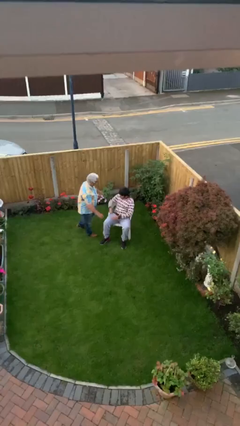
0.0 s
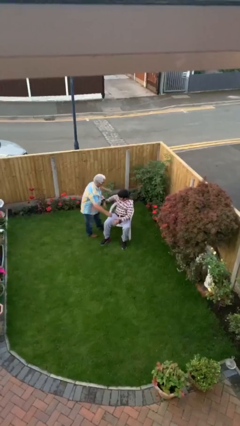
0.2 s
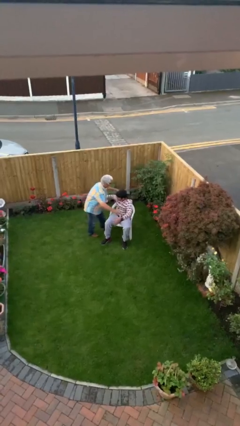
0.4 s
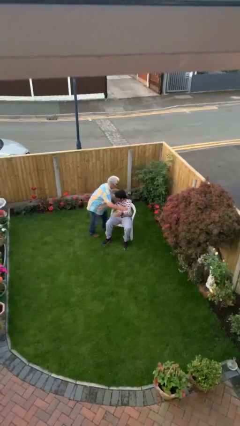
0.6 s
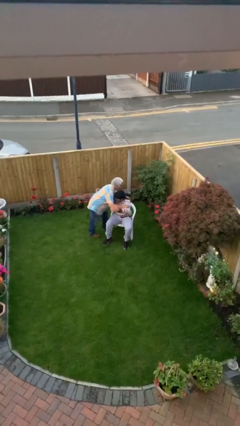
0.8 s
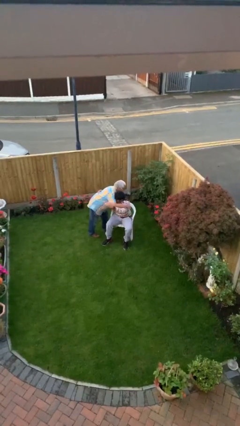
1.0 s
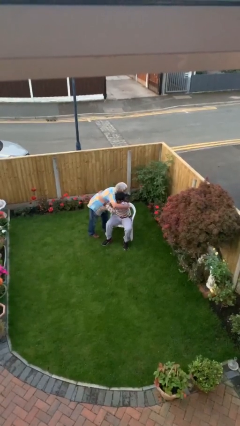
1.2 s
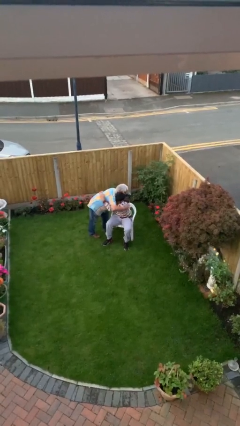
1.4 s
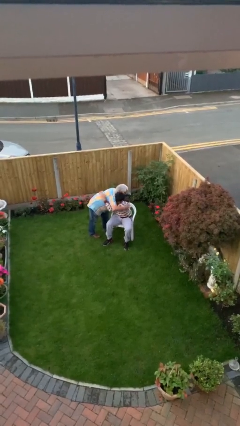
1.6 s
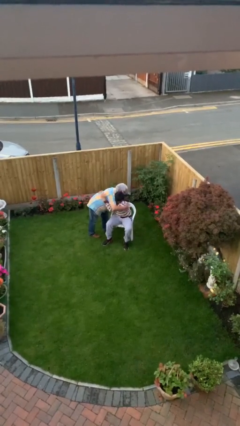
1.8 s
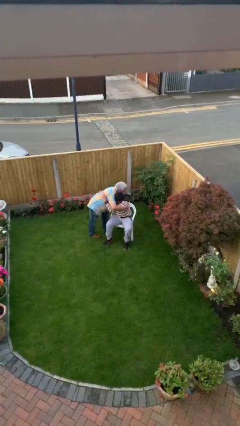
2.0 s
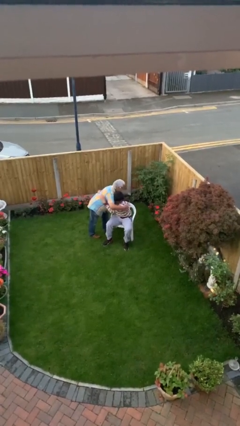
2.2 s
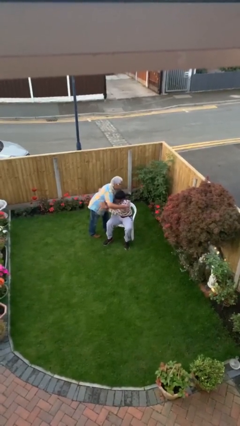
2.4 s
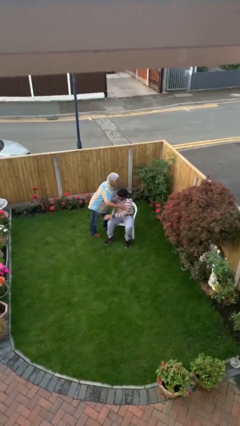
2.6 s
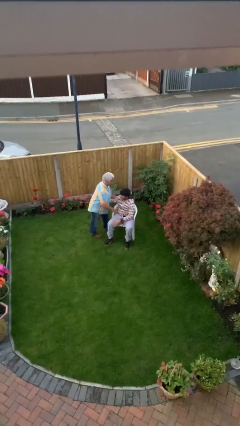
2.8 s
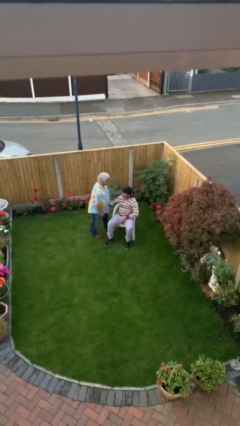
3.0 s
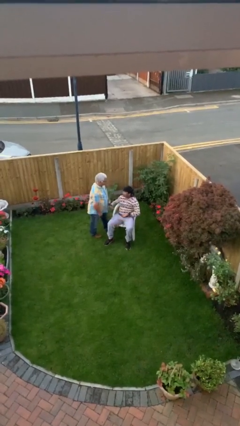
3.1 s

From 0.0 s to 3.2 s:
person embraces person

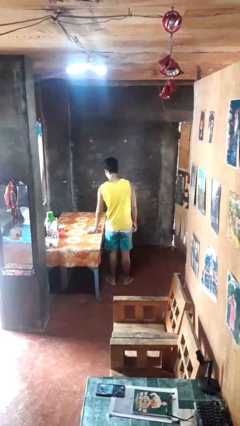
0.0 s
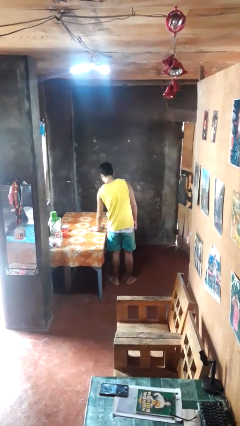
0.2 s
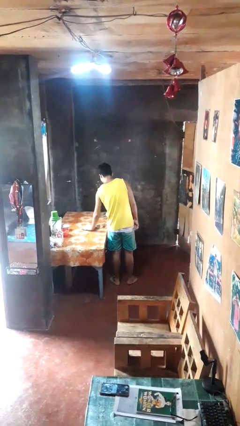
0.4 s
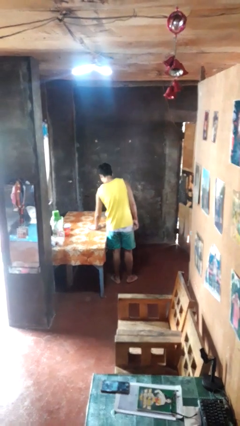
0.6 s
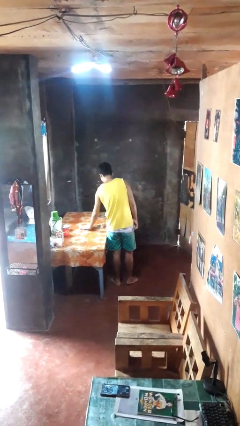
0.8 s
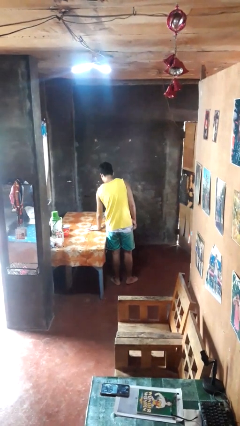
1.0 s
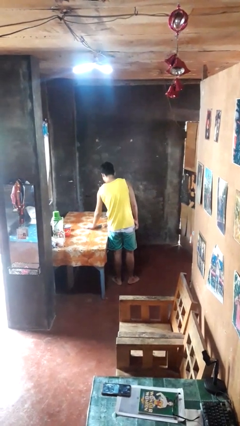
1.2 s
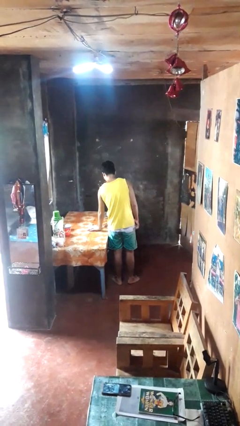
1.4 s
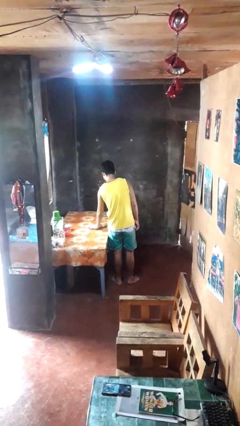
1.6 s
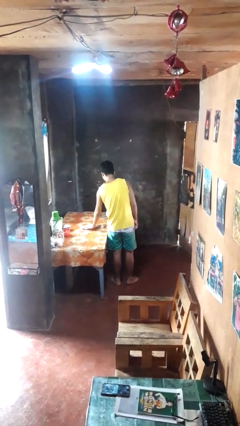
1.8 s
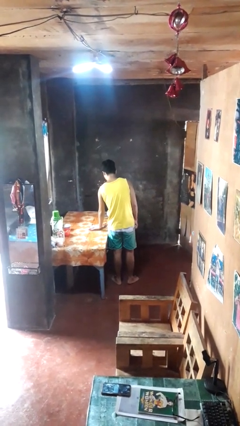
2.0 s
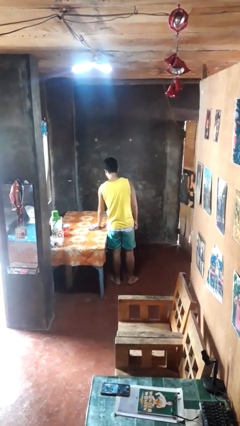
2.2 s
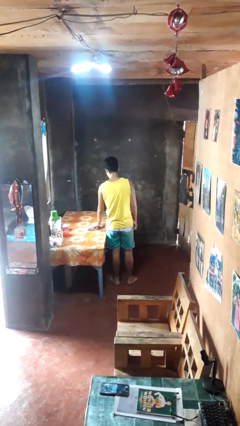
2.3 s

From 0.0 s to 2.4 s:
person cleans table with rag

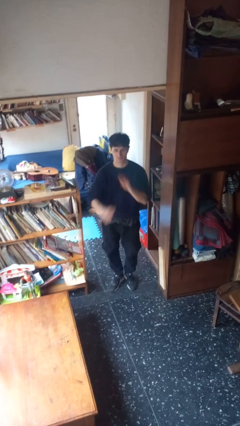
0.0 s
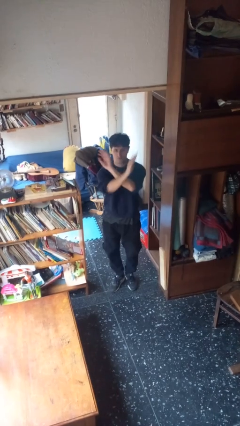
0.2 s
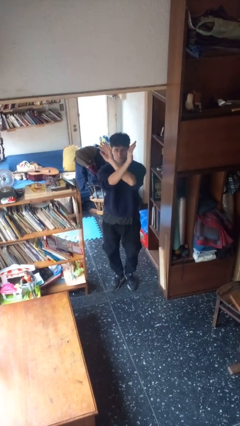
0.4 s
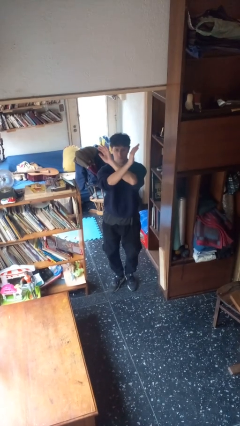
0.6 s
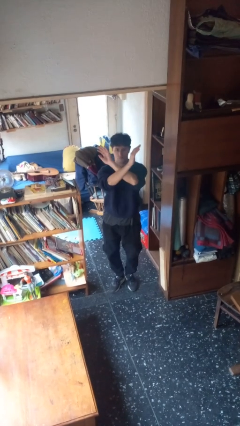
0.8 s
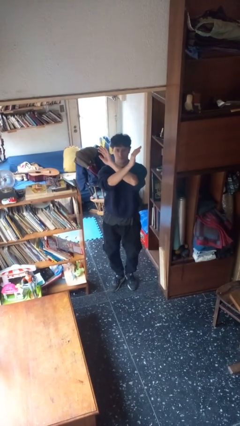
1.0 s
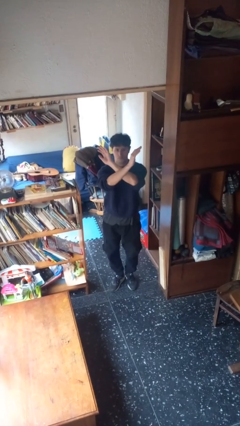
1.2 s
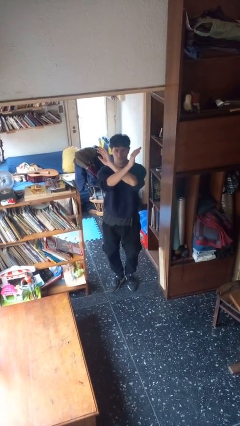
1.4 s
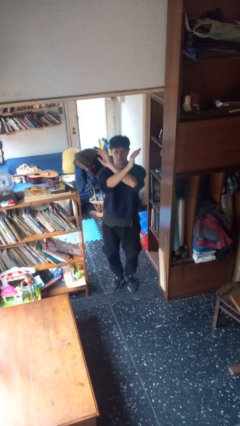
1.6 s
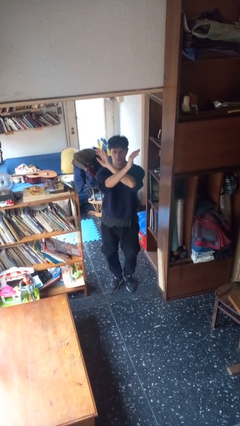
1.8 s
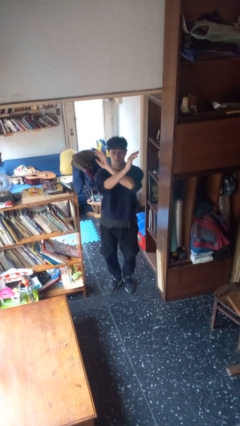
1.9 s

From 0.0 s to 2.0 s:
person gestures arms x

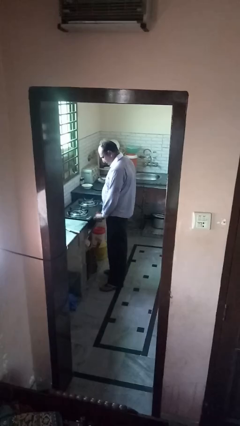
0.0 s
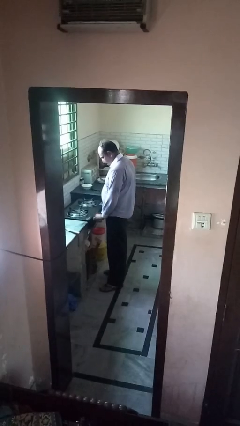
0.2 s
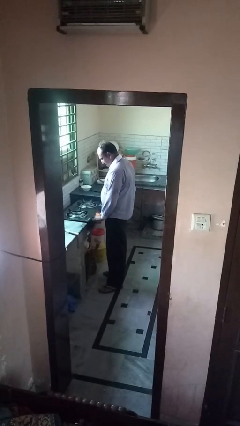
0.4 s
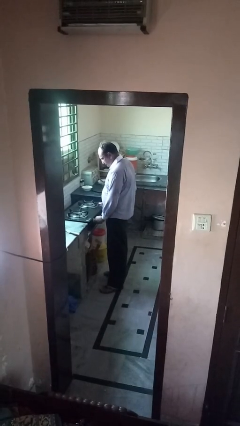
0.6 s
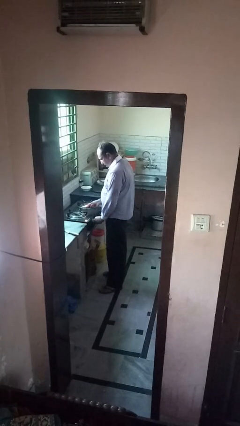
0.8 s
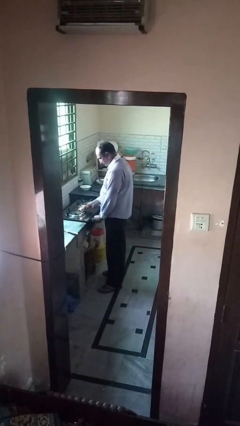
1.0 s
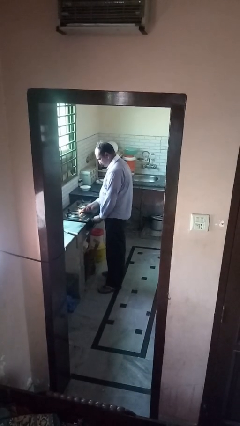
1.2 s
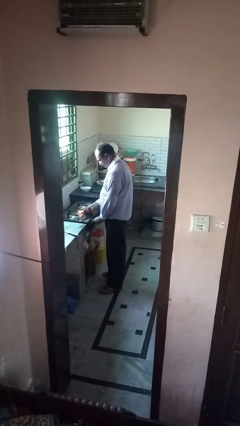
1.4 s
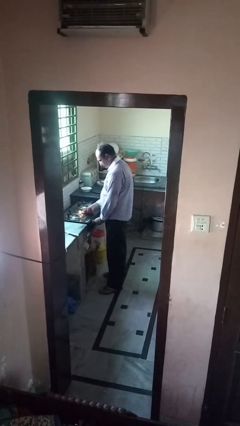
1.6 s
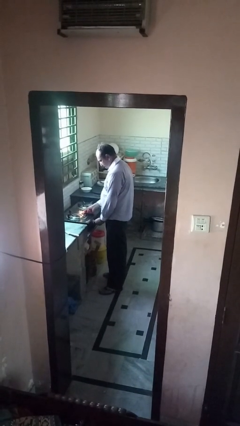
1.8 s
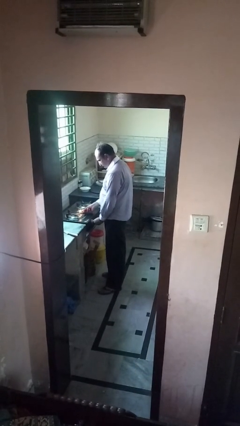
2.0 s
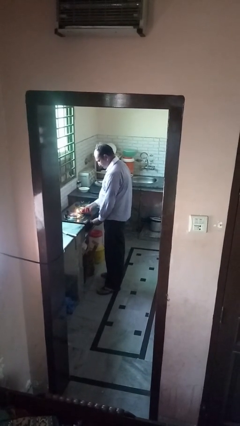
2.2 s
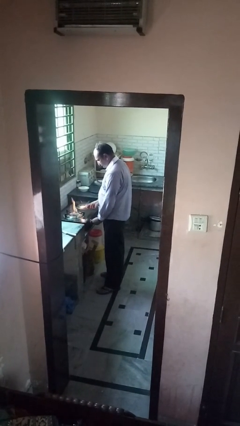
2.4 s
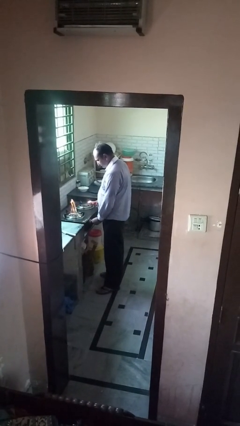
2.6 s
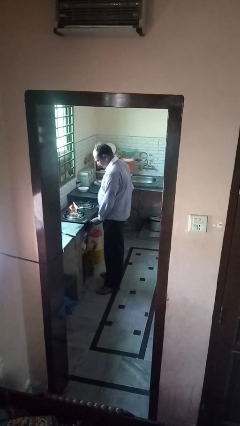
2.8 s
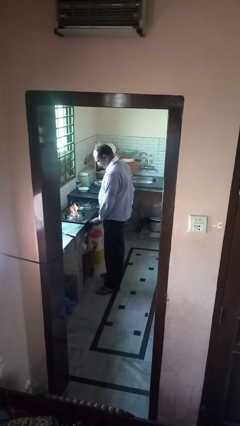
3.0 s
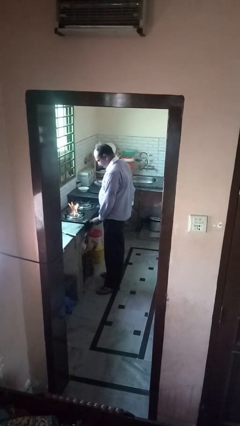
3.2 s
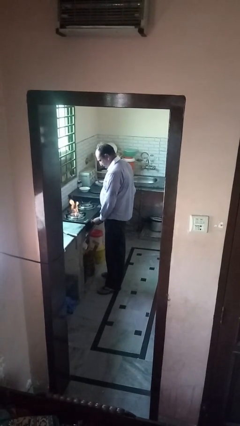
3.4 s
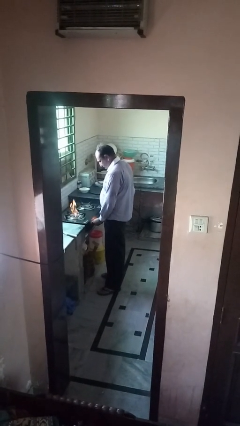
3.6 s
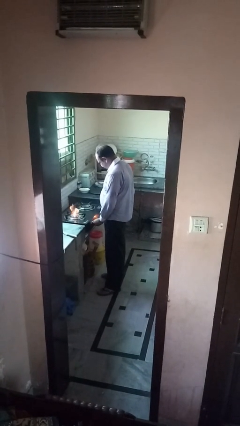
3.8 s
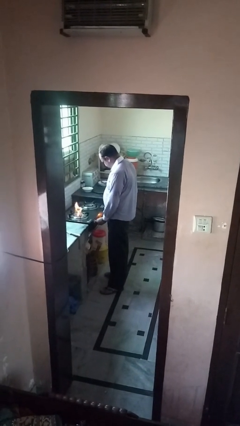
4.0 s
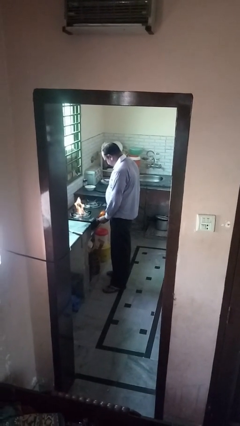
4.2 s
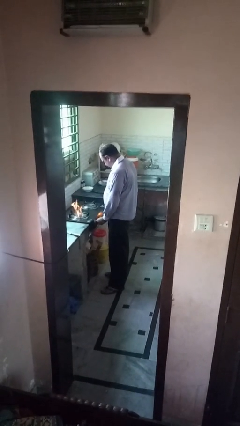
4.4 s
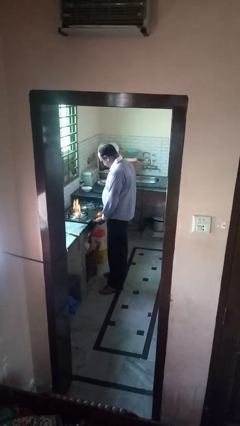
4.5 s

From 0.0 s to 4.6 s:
person turns on stovetop

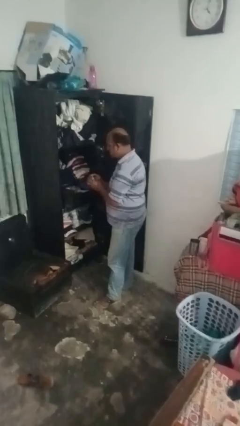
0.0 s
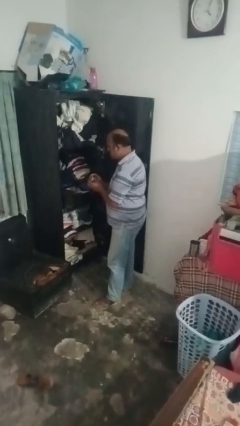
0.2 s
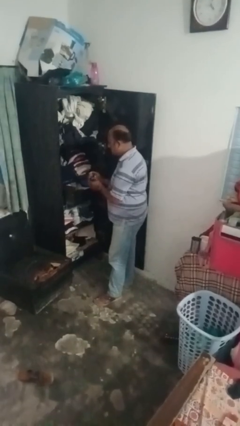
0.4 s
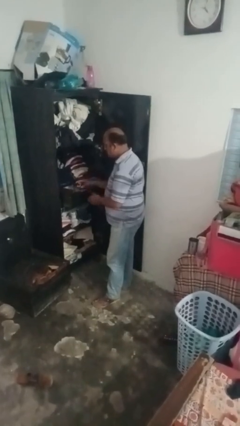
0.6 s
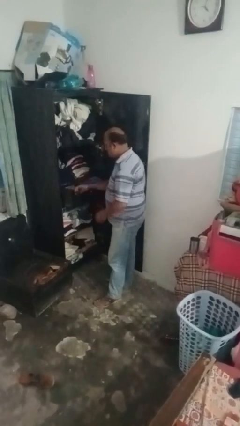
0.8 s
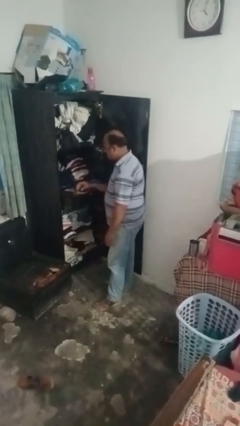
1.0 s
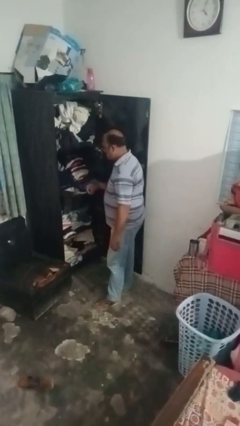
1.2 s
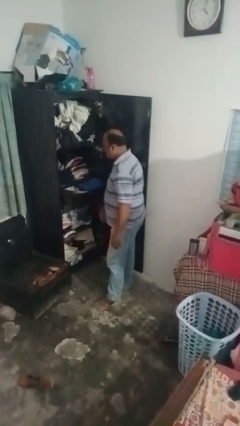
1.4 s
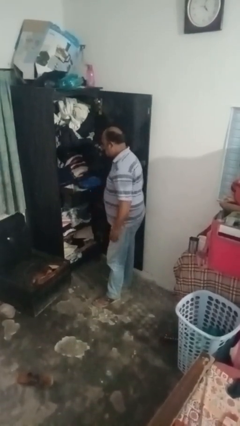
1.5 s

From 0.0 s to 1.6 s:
person takes clothes from dresser

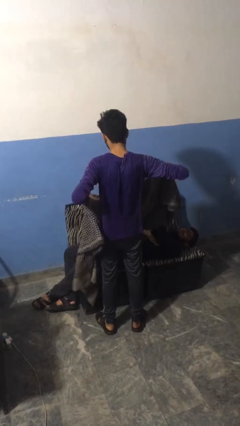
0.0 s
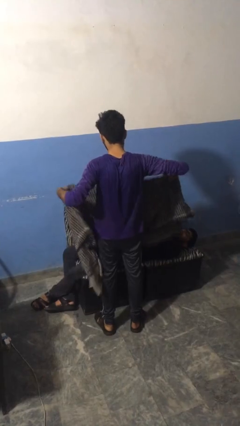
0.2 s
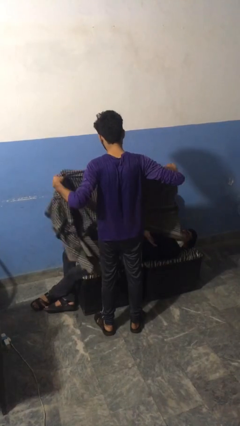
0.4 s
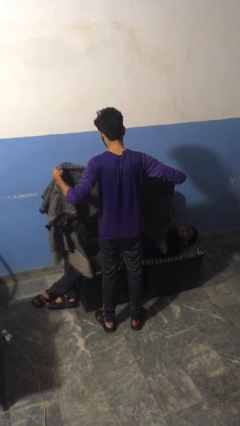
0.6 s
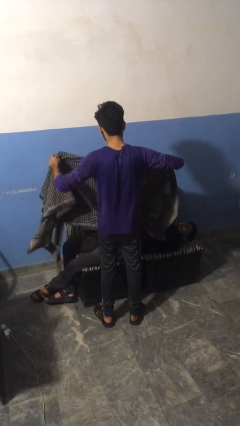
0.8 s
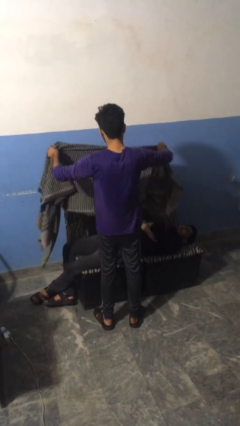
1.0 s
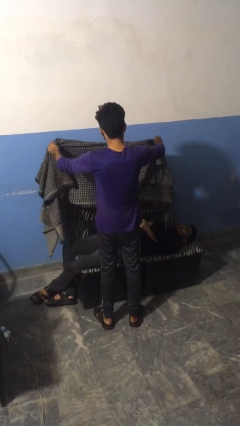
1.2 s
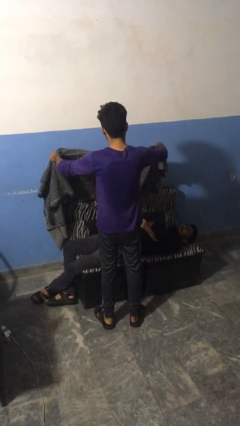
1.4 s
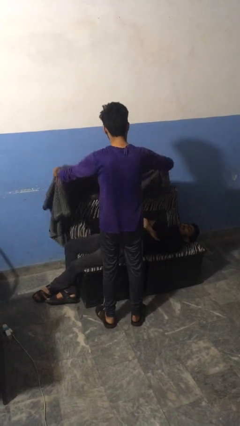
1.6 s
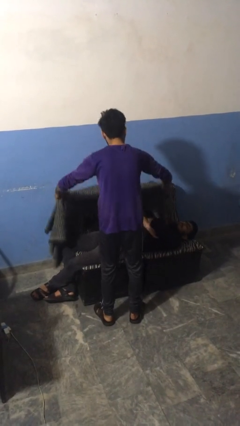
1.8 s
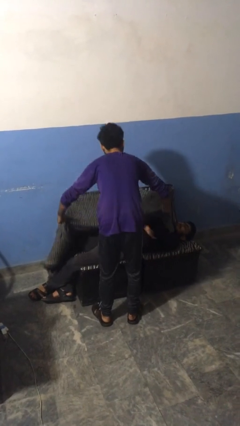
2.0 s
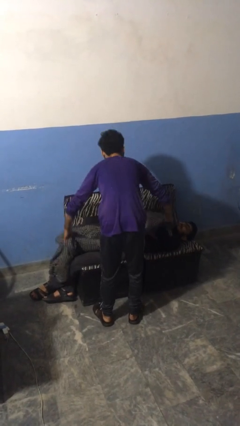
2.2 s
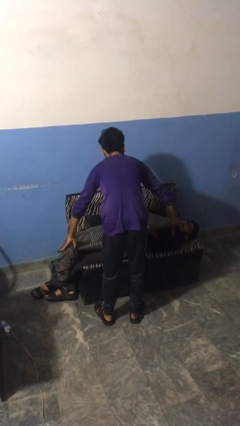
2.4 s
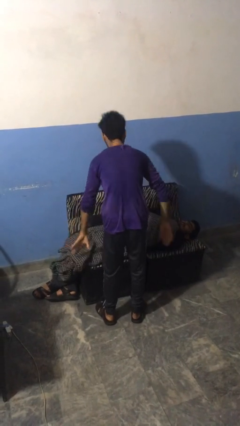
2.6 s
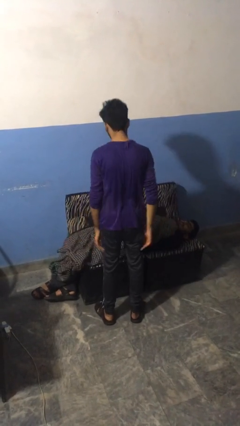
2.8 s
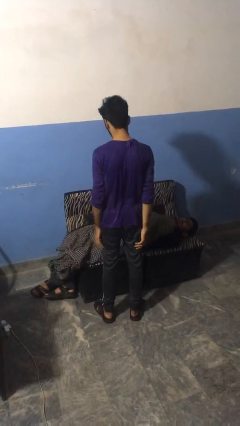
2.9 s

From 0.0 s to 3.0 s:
person covers friend with blanket

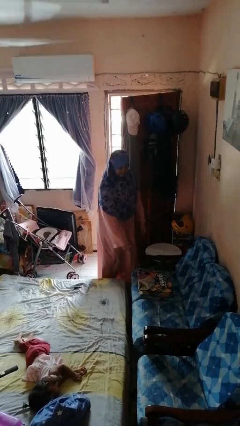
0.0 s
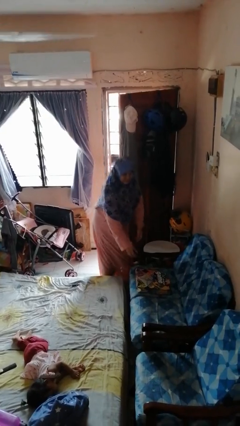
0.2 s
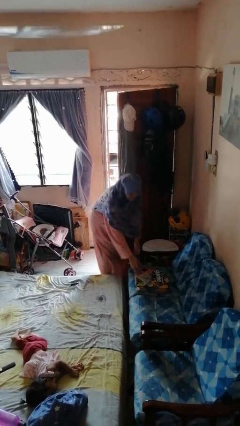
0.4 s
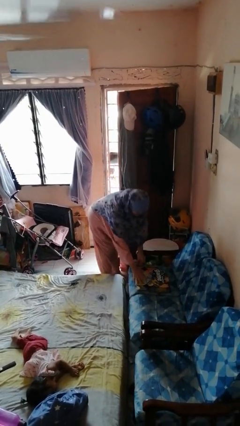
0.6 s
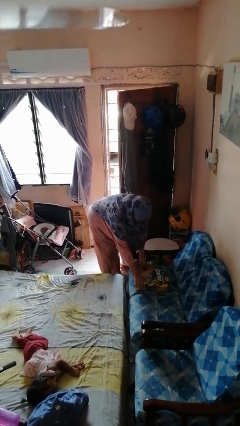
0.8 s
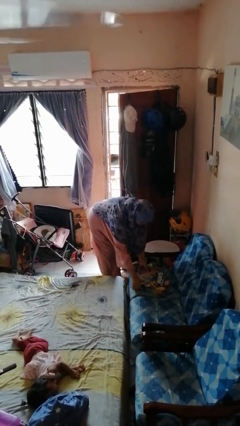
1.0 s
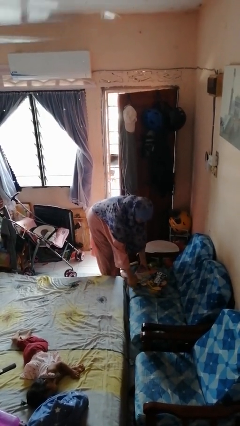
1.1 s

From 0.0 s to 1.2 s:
person puts down object on couch
